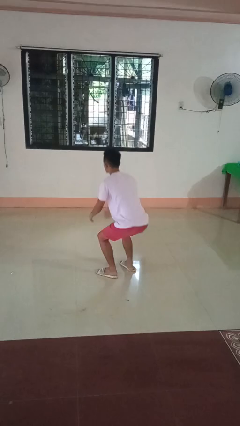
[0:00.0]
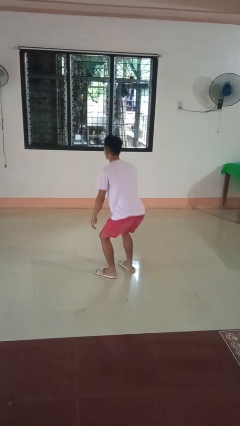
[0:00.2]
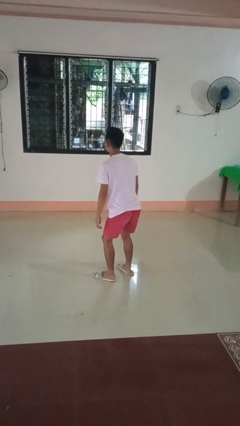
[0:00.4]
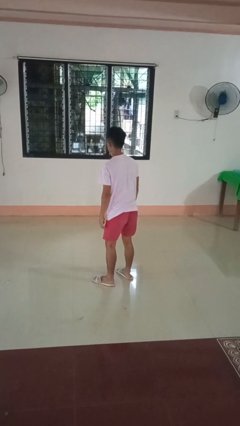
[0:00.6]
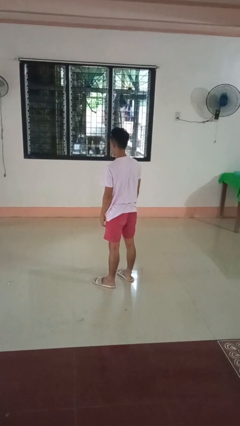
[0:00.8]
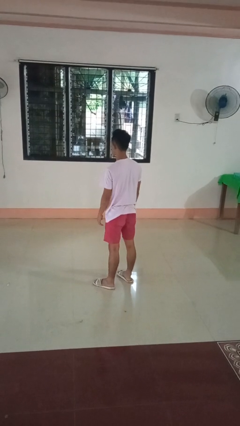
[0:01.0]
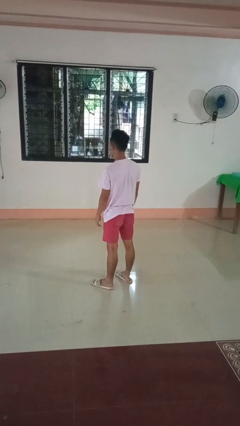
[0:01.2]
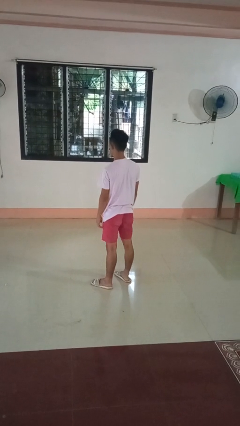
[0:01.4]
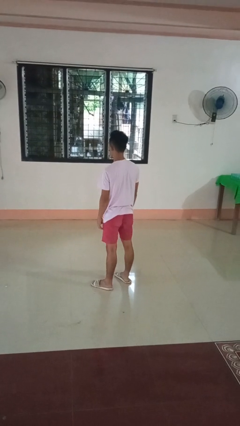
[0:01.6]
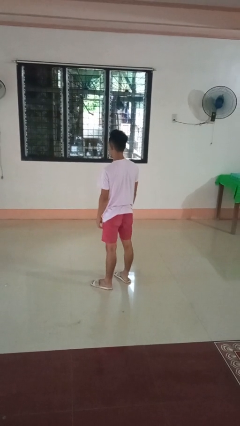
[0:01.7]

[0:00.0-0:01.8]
person stands up

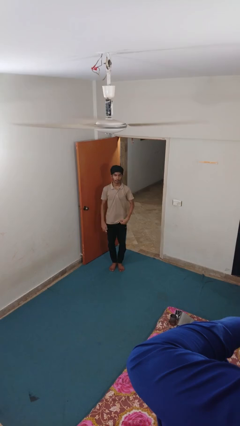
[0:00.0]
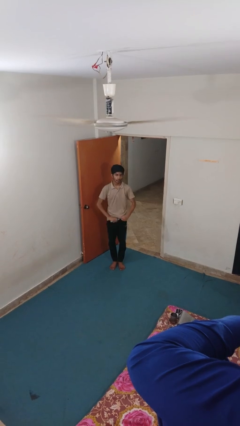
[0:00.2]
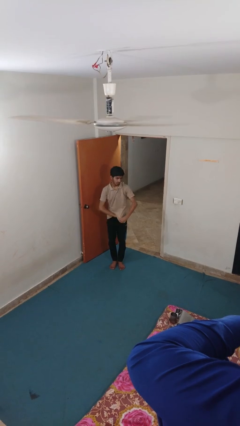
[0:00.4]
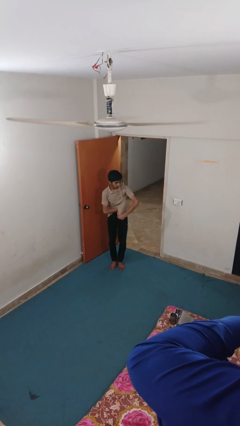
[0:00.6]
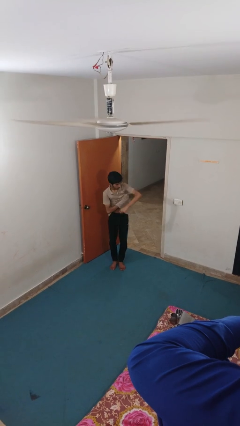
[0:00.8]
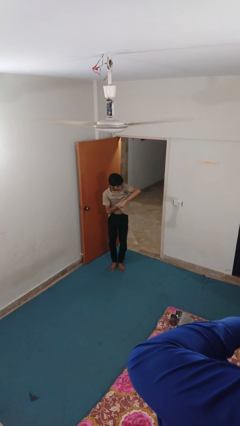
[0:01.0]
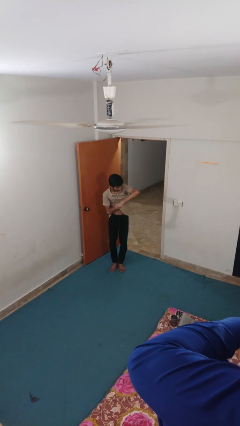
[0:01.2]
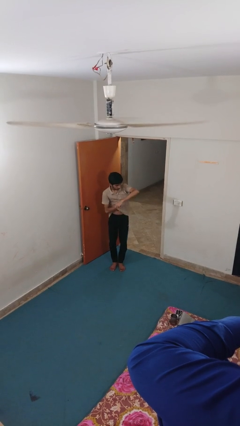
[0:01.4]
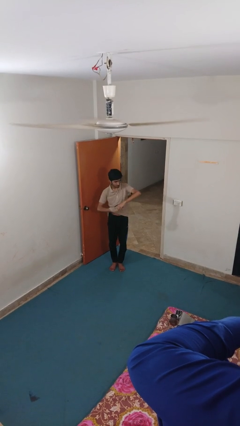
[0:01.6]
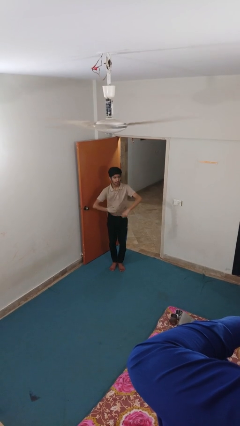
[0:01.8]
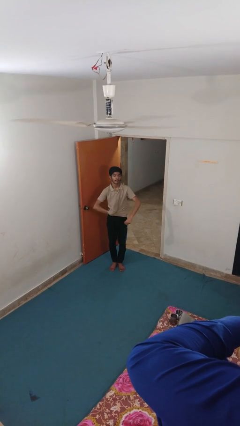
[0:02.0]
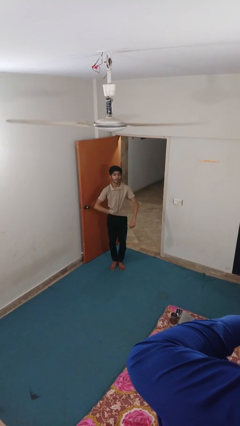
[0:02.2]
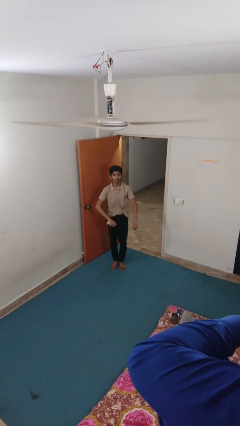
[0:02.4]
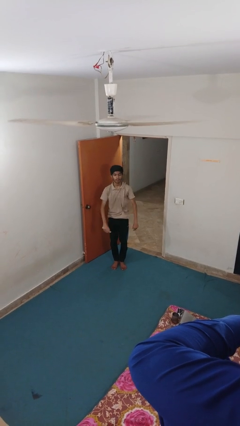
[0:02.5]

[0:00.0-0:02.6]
person applies deodorant

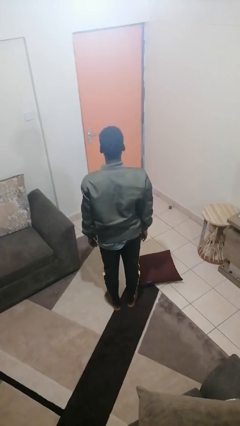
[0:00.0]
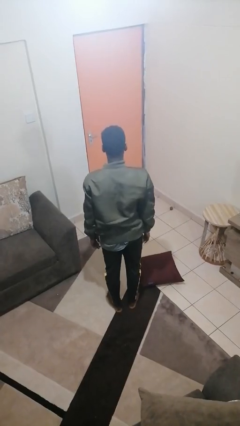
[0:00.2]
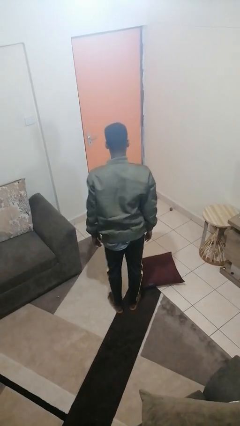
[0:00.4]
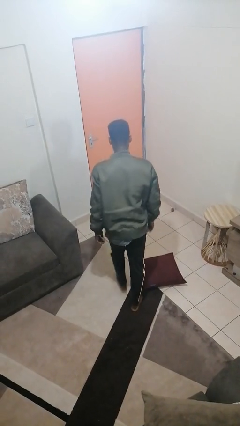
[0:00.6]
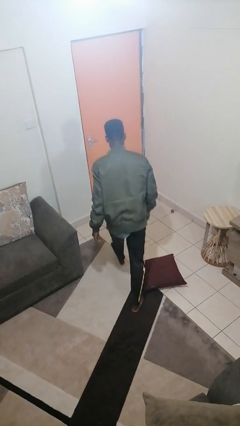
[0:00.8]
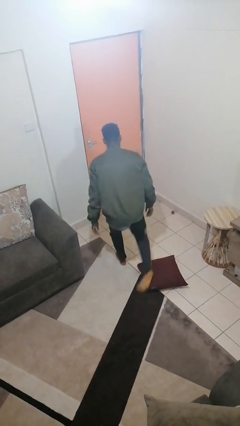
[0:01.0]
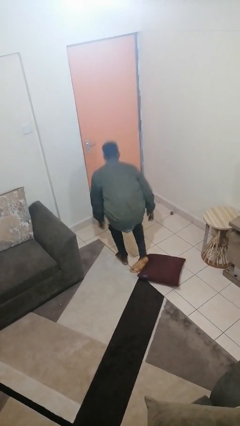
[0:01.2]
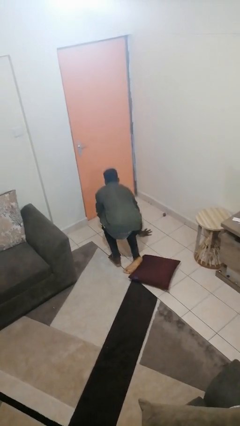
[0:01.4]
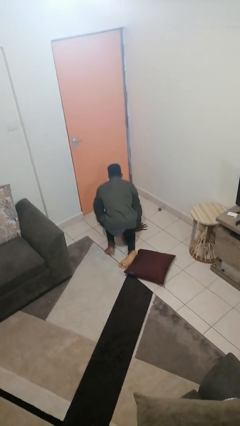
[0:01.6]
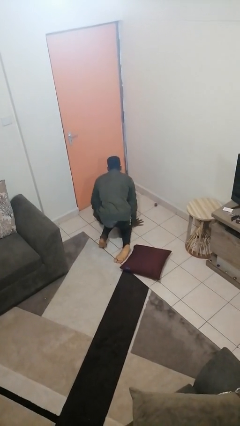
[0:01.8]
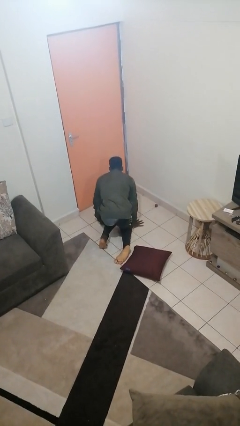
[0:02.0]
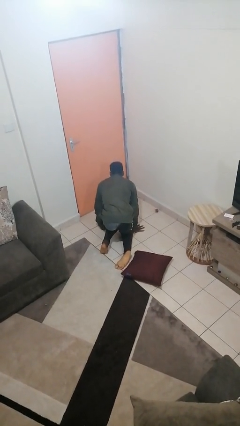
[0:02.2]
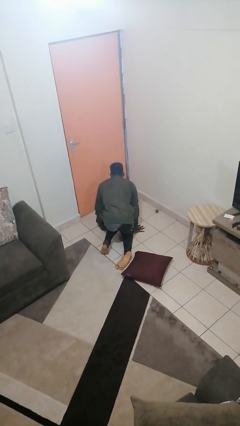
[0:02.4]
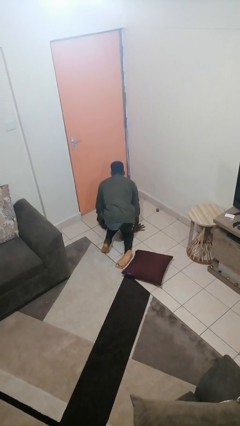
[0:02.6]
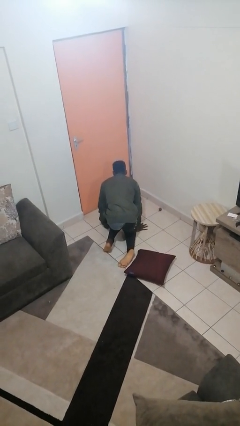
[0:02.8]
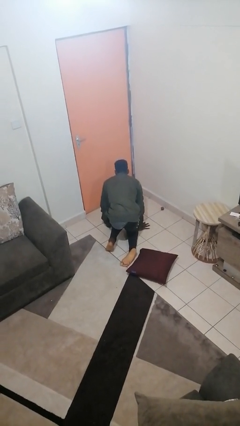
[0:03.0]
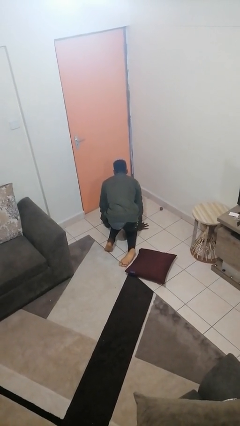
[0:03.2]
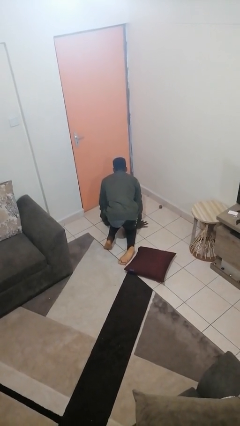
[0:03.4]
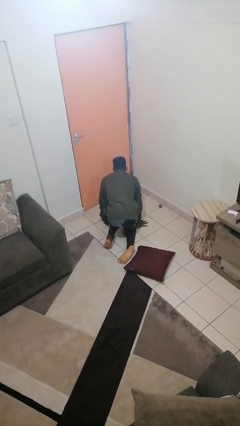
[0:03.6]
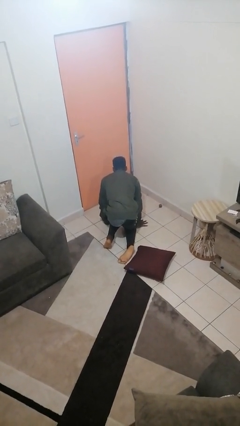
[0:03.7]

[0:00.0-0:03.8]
person trips on object on floor

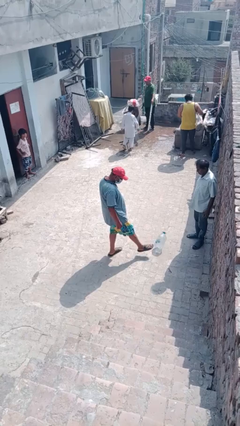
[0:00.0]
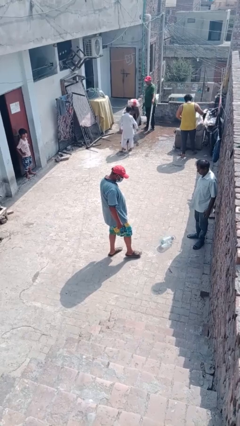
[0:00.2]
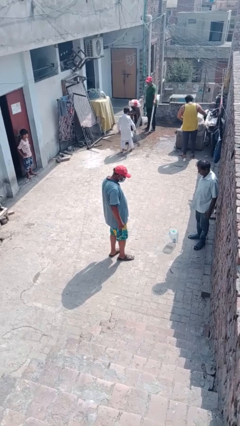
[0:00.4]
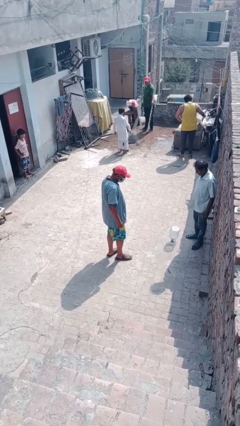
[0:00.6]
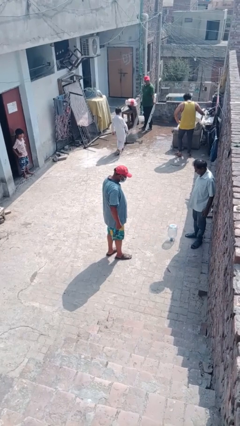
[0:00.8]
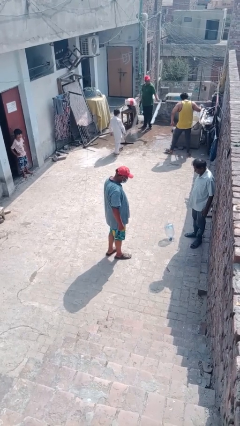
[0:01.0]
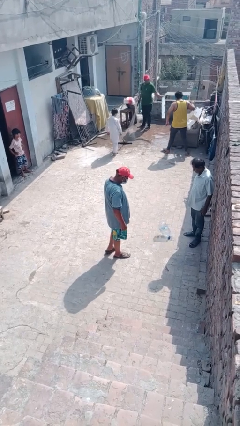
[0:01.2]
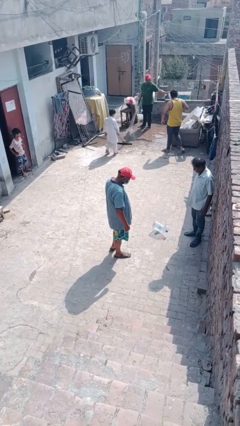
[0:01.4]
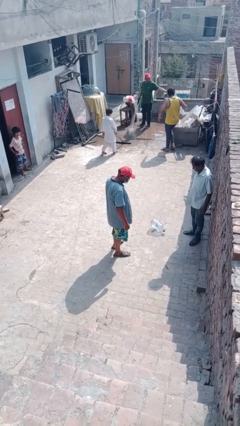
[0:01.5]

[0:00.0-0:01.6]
person kicks object to person

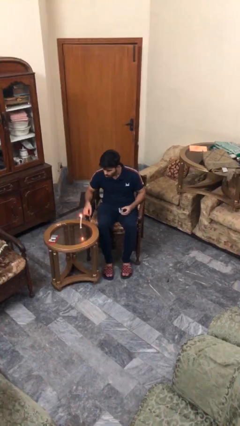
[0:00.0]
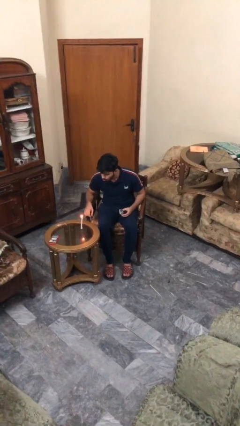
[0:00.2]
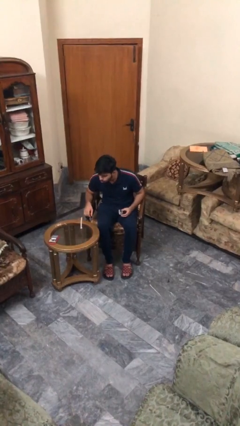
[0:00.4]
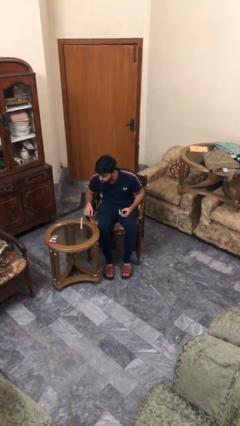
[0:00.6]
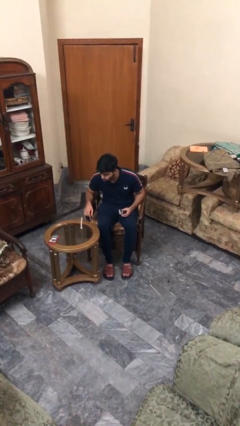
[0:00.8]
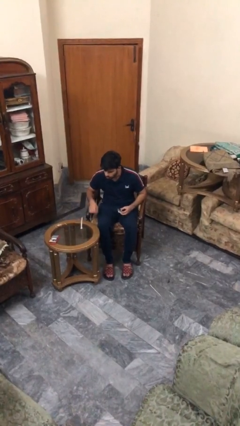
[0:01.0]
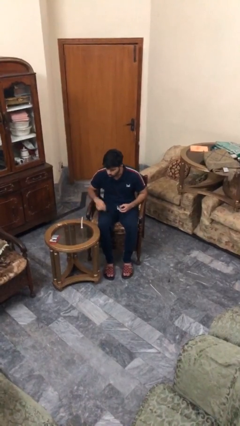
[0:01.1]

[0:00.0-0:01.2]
person extinguishes candle

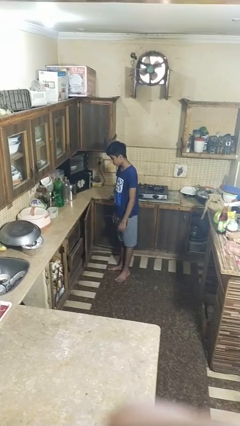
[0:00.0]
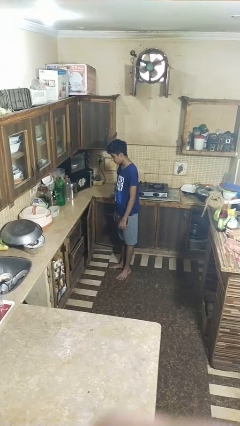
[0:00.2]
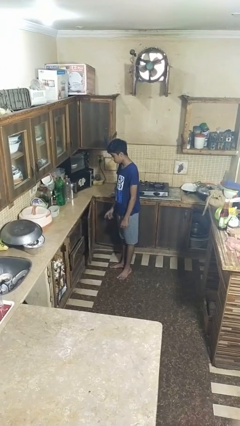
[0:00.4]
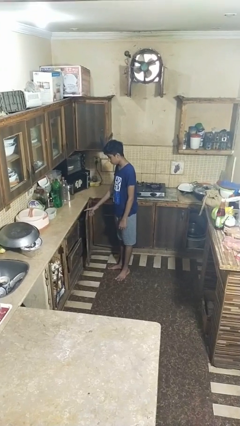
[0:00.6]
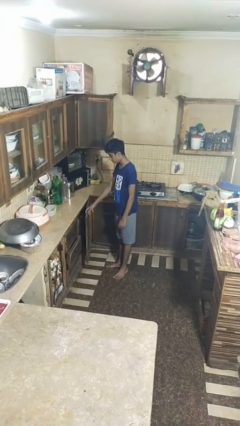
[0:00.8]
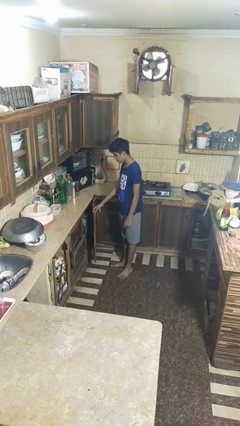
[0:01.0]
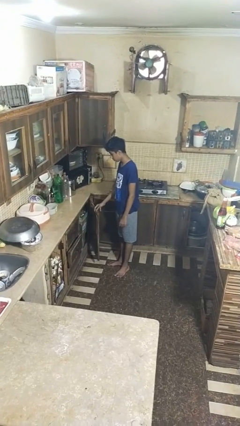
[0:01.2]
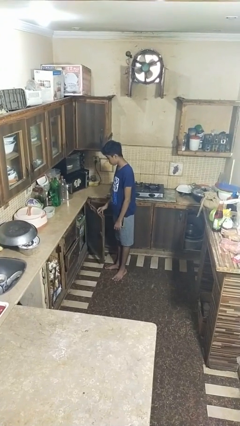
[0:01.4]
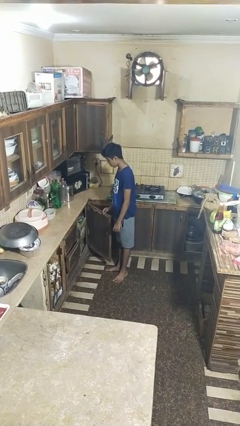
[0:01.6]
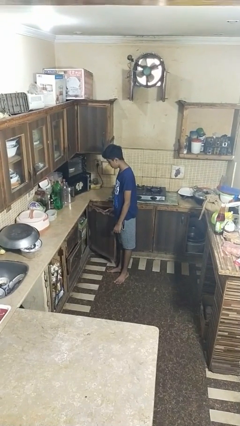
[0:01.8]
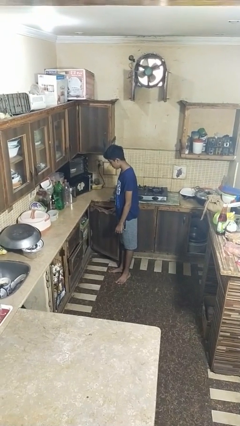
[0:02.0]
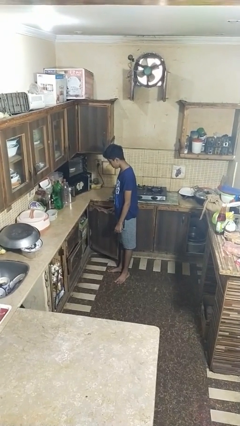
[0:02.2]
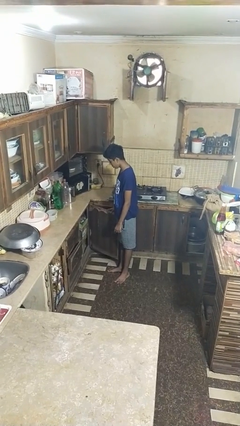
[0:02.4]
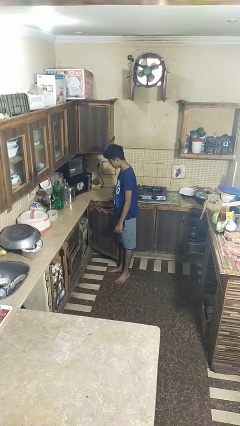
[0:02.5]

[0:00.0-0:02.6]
person opens closet door

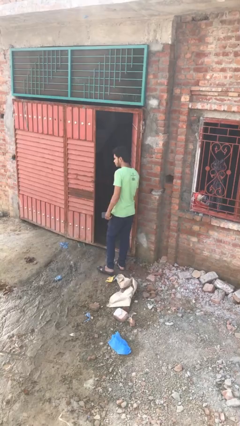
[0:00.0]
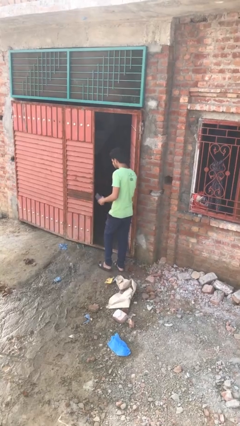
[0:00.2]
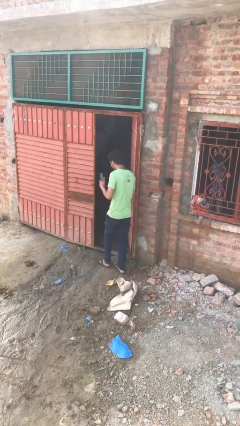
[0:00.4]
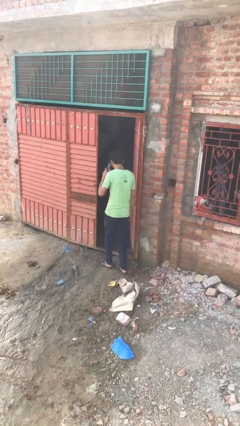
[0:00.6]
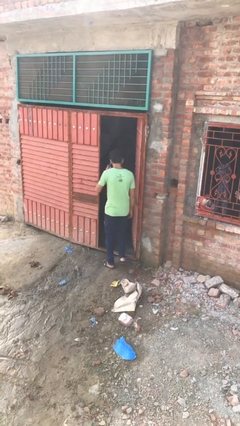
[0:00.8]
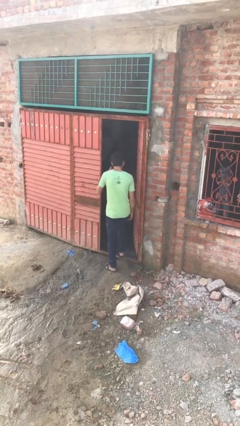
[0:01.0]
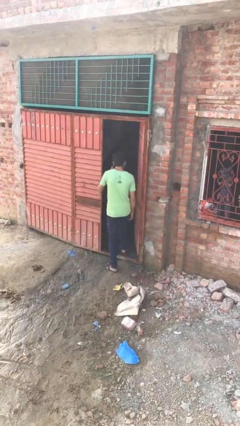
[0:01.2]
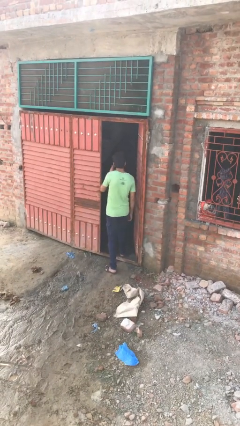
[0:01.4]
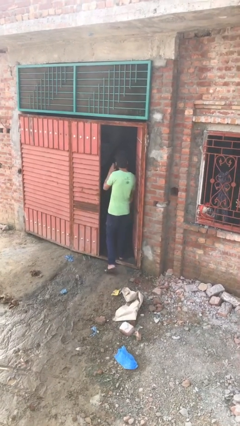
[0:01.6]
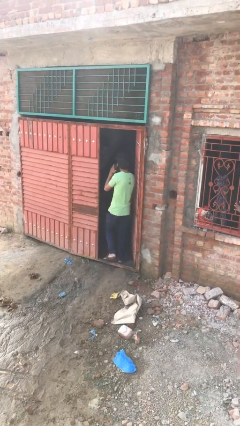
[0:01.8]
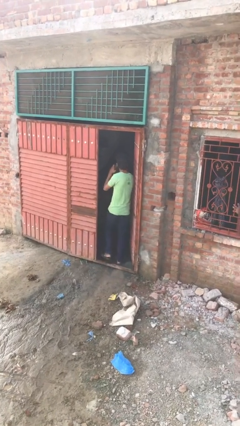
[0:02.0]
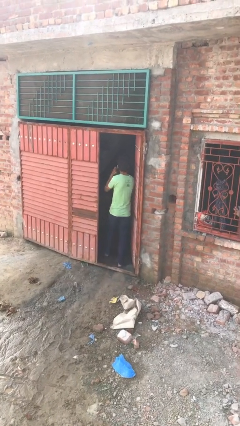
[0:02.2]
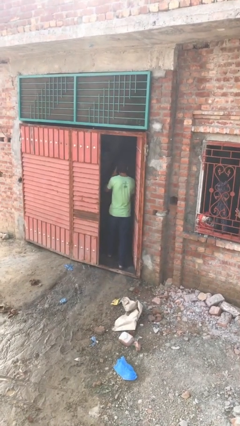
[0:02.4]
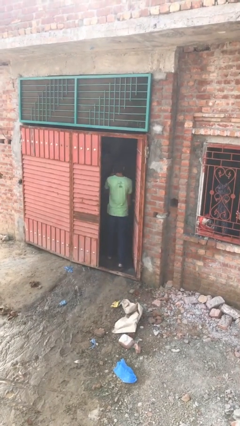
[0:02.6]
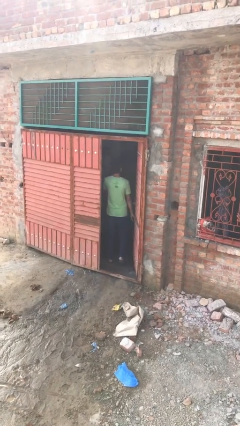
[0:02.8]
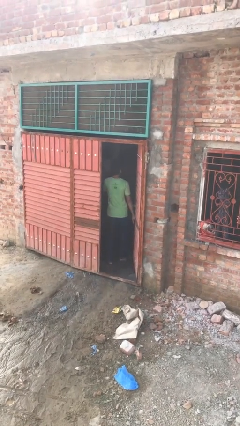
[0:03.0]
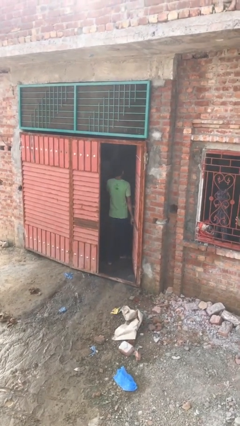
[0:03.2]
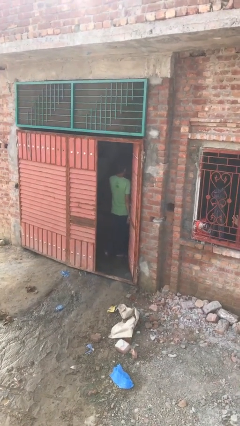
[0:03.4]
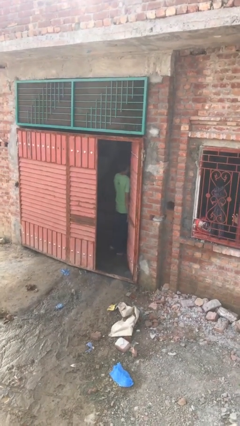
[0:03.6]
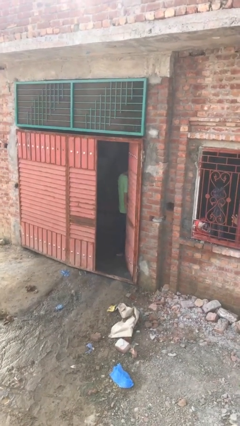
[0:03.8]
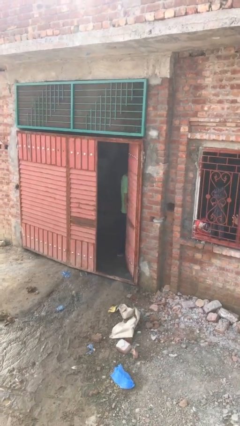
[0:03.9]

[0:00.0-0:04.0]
person exits scene through structure
